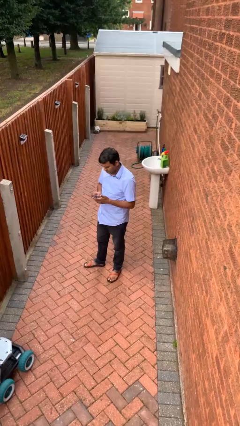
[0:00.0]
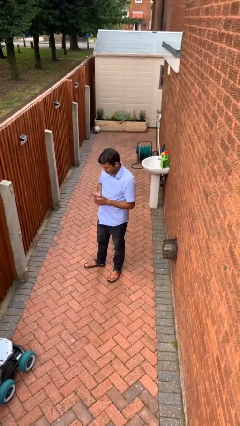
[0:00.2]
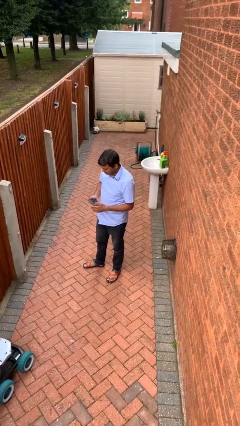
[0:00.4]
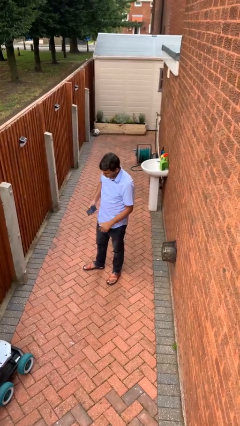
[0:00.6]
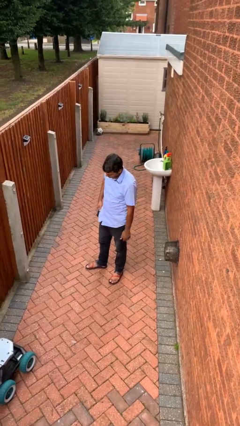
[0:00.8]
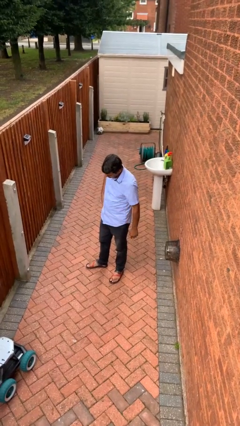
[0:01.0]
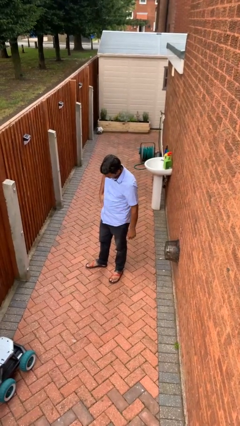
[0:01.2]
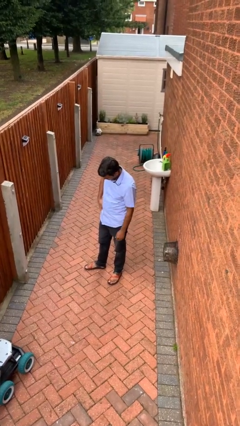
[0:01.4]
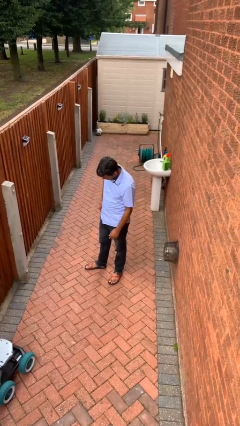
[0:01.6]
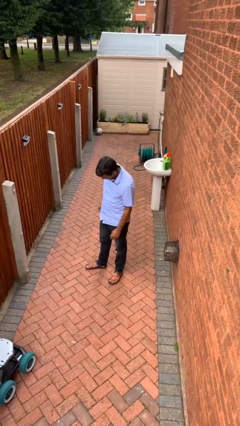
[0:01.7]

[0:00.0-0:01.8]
person puts phone into pocket

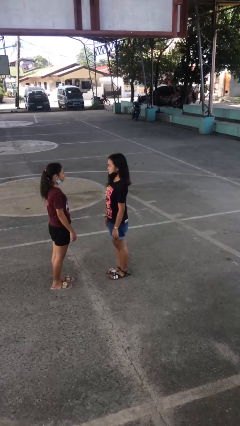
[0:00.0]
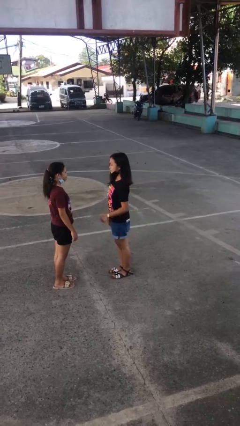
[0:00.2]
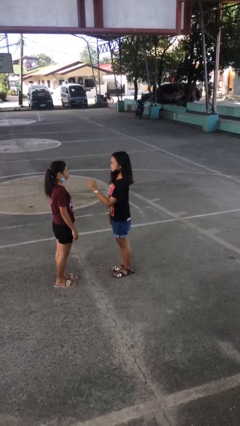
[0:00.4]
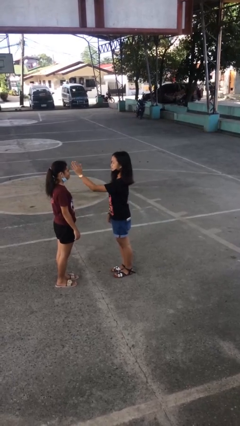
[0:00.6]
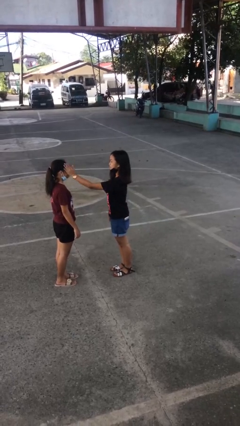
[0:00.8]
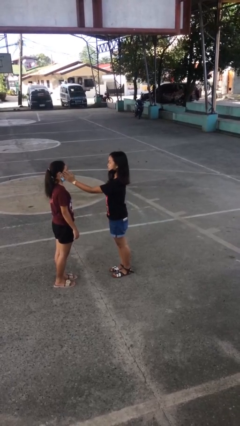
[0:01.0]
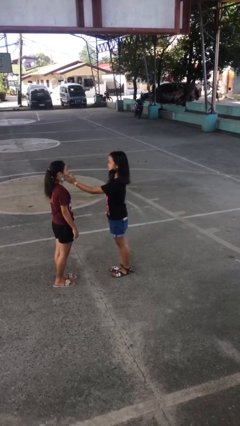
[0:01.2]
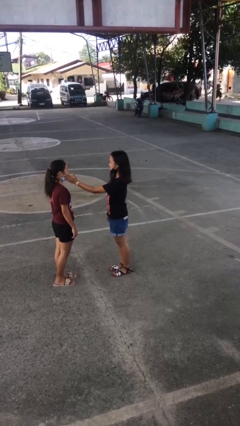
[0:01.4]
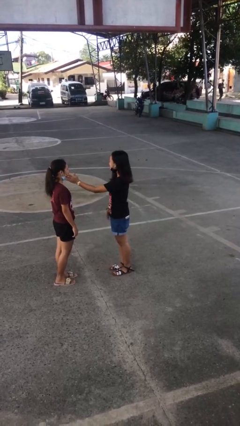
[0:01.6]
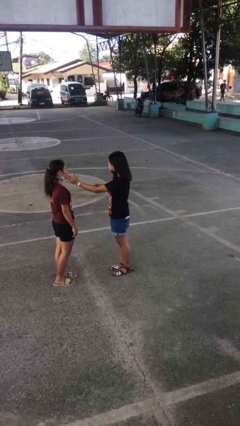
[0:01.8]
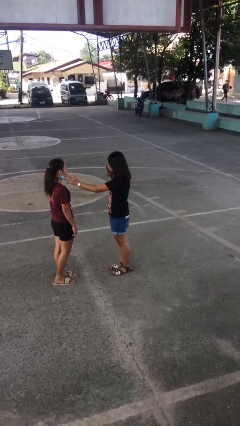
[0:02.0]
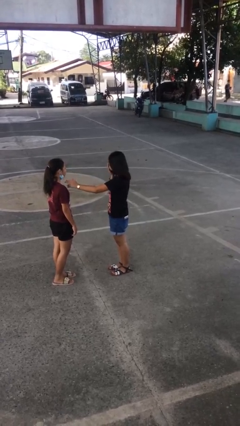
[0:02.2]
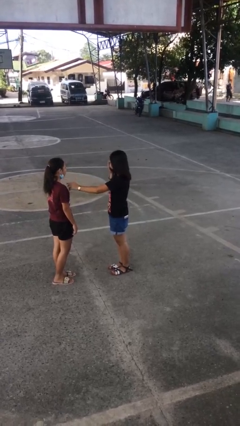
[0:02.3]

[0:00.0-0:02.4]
person touches face of person

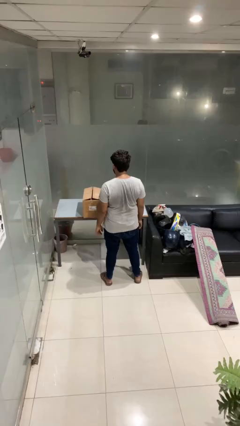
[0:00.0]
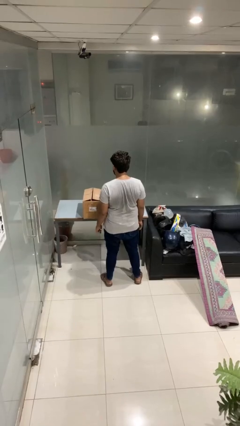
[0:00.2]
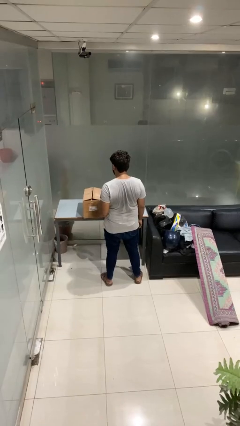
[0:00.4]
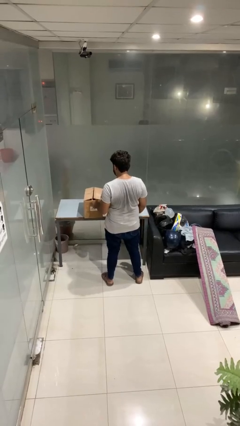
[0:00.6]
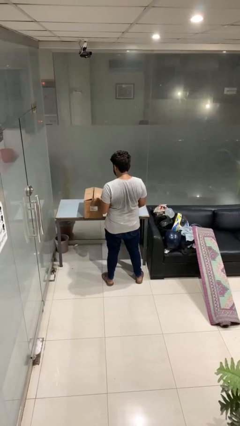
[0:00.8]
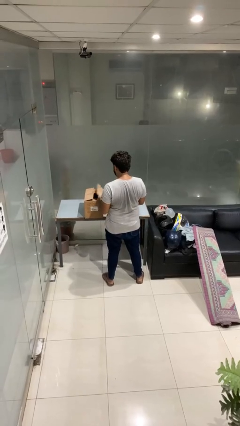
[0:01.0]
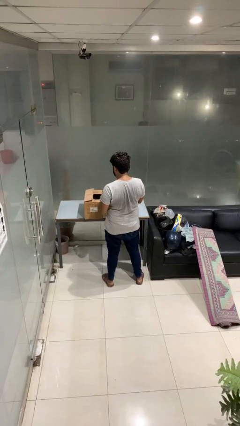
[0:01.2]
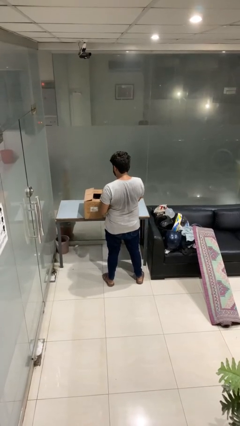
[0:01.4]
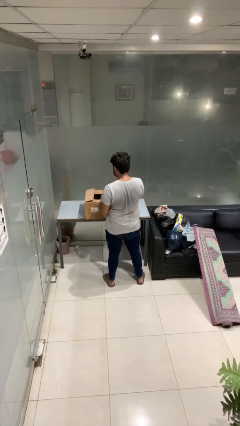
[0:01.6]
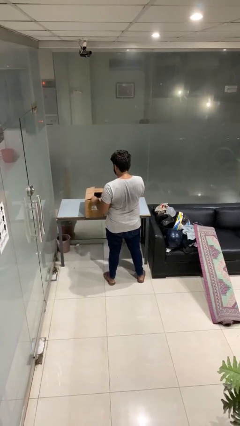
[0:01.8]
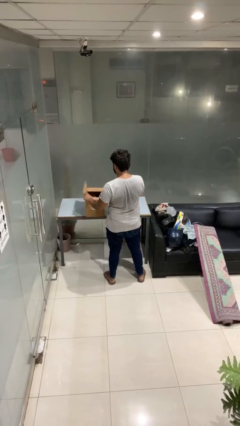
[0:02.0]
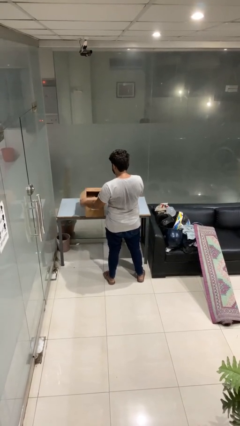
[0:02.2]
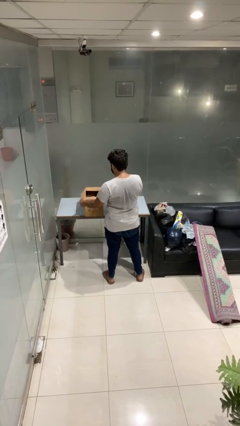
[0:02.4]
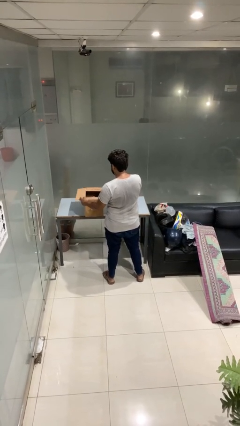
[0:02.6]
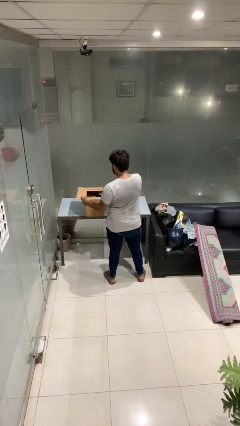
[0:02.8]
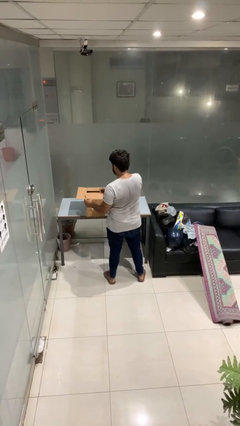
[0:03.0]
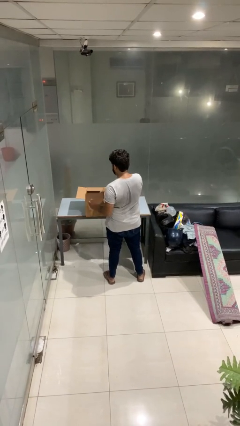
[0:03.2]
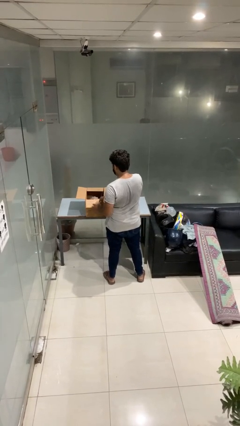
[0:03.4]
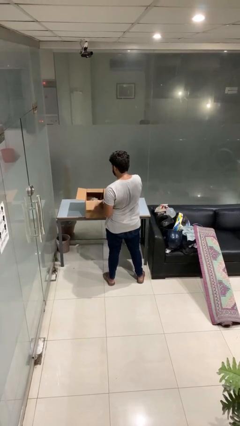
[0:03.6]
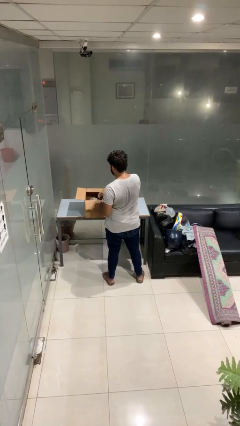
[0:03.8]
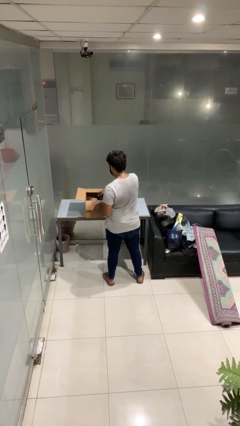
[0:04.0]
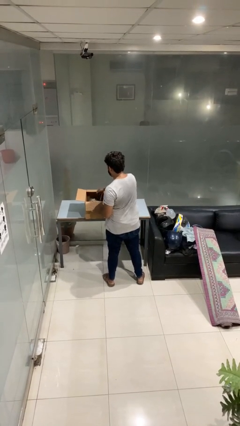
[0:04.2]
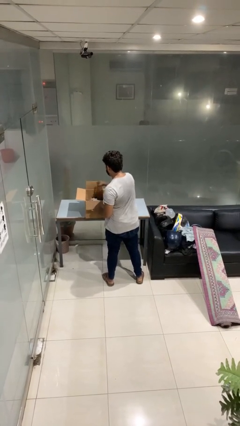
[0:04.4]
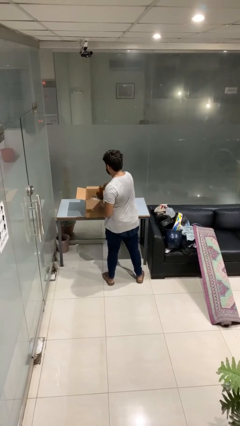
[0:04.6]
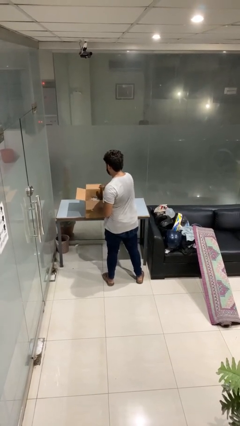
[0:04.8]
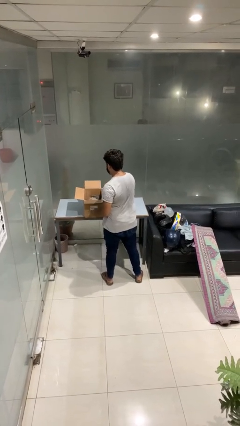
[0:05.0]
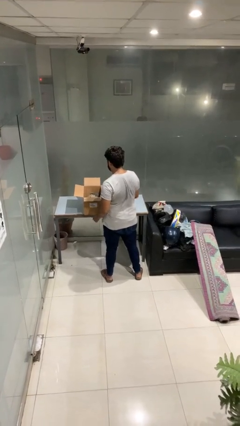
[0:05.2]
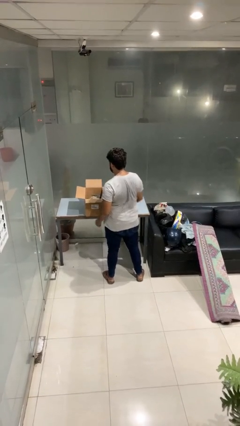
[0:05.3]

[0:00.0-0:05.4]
person opens box

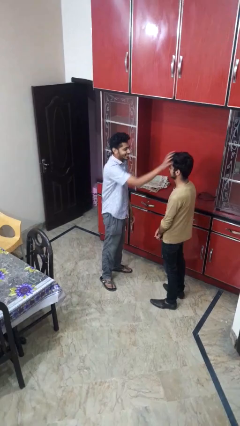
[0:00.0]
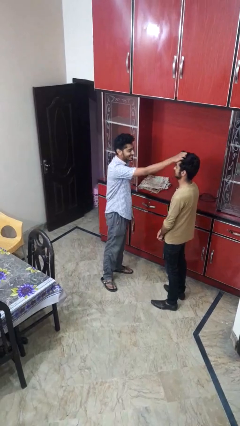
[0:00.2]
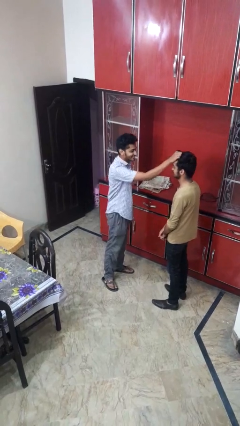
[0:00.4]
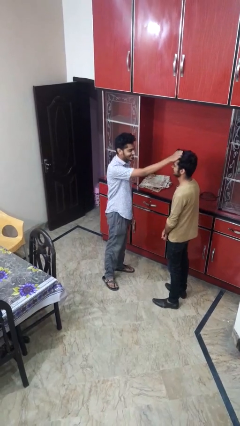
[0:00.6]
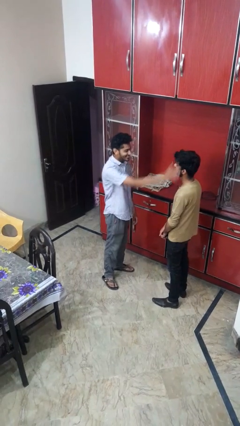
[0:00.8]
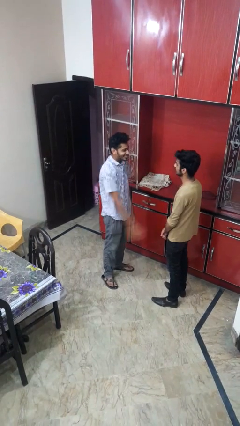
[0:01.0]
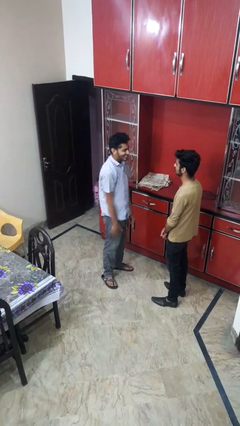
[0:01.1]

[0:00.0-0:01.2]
person grabs person by hair

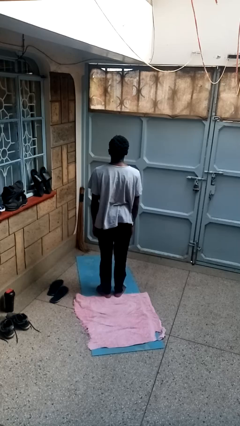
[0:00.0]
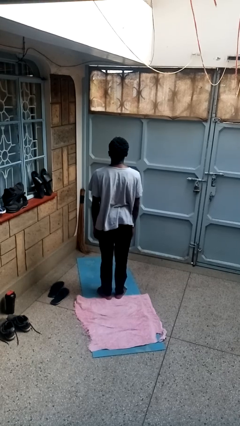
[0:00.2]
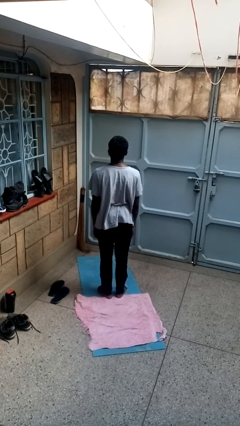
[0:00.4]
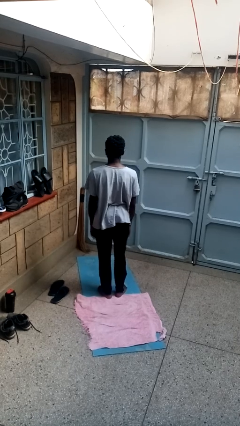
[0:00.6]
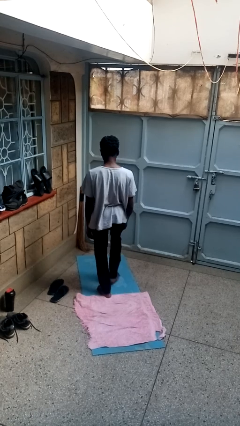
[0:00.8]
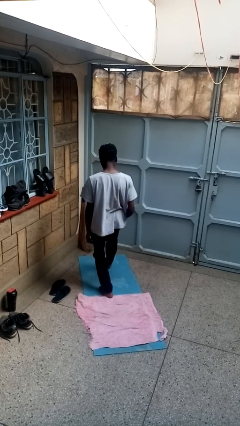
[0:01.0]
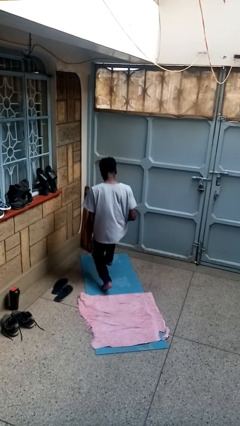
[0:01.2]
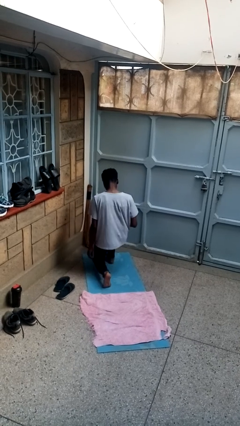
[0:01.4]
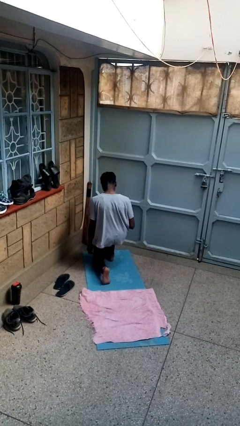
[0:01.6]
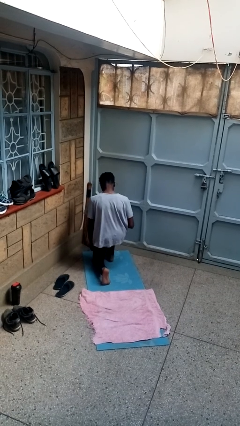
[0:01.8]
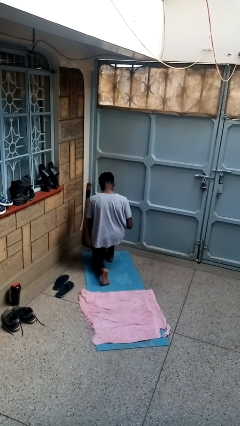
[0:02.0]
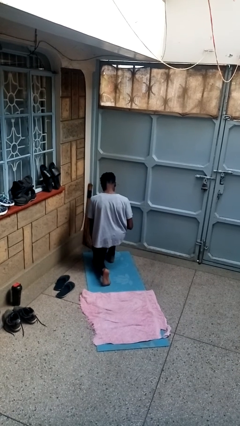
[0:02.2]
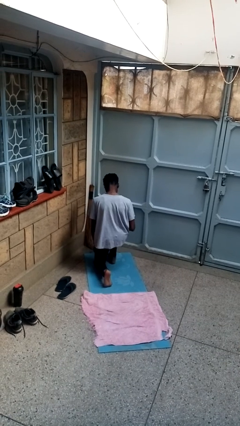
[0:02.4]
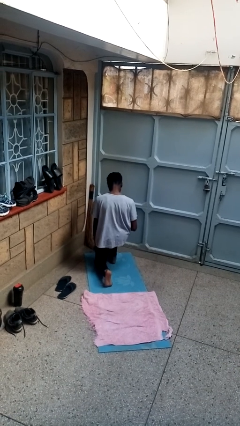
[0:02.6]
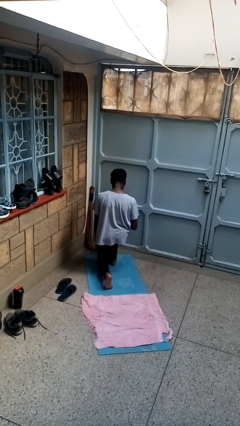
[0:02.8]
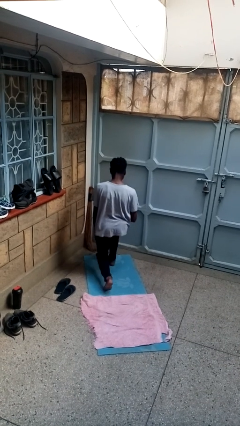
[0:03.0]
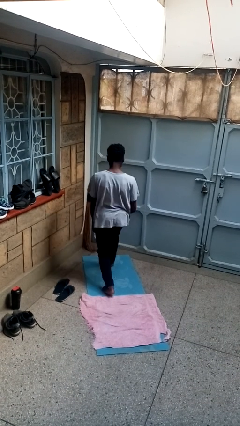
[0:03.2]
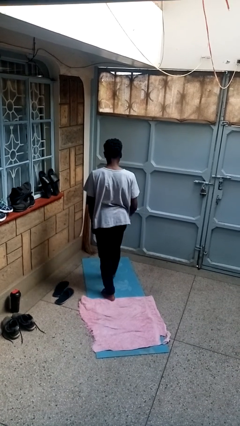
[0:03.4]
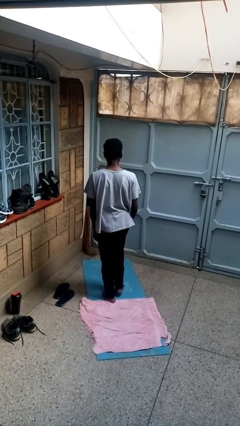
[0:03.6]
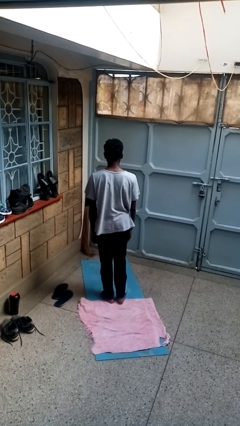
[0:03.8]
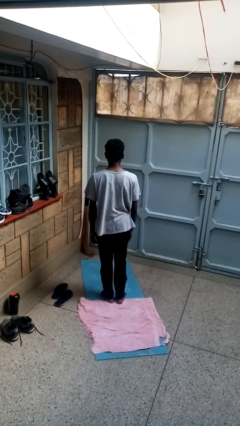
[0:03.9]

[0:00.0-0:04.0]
person exercises with lunges

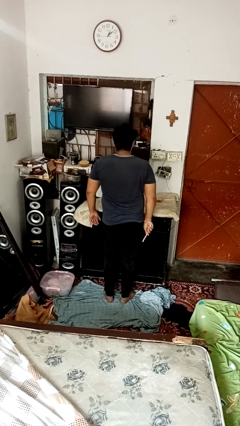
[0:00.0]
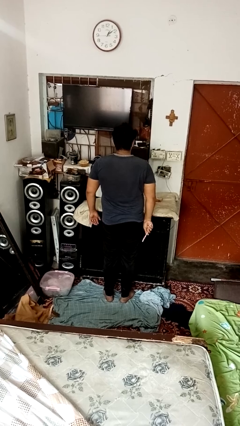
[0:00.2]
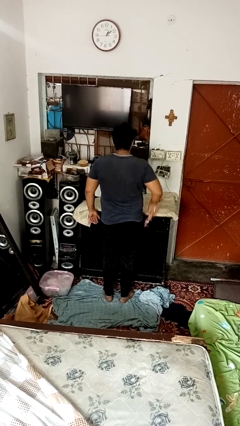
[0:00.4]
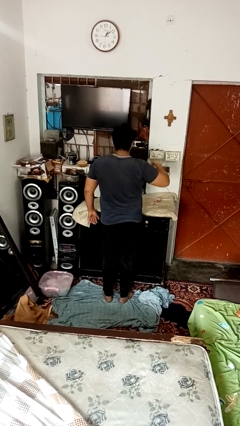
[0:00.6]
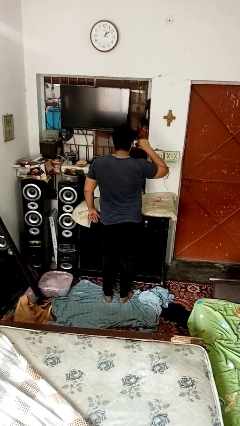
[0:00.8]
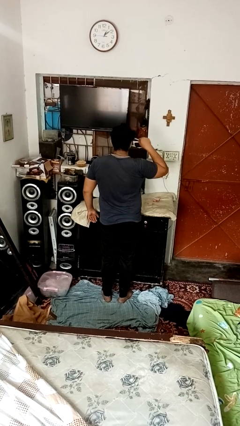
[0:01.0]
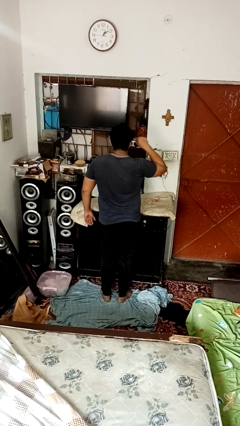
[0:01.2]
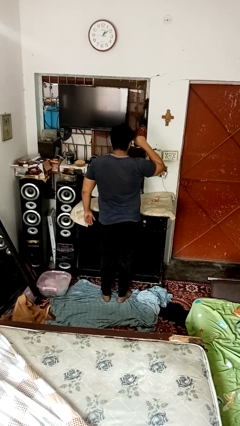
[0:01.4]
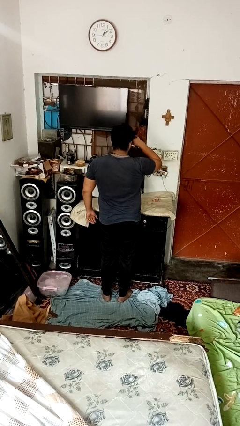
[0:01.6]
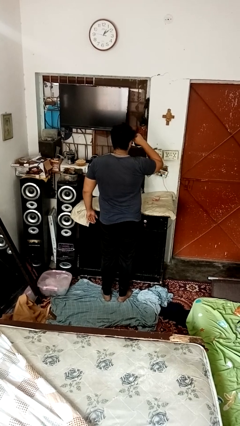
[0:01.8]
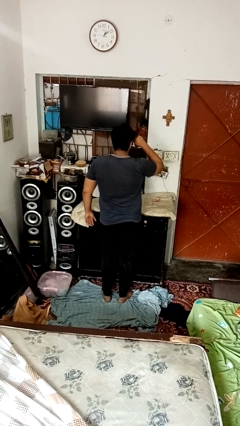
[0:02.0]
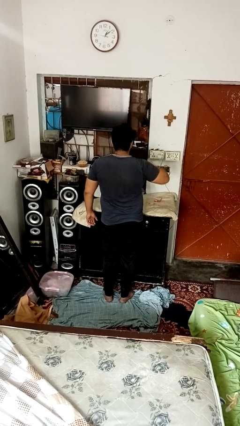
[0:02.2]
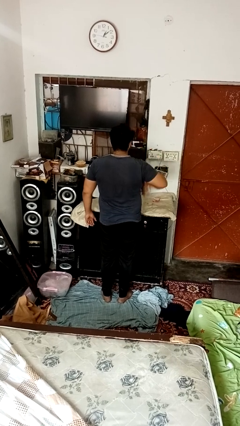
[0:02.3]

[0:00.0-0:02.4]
person applies eye makeup
